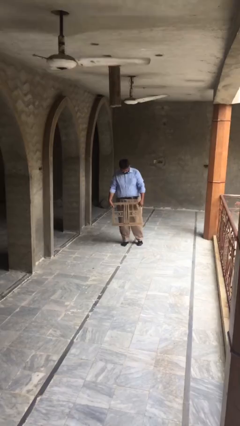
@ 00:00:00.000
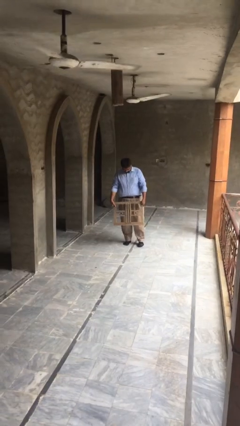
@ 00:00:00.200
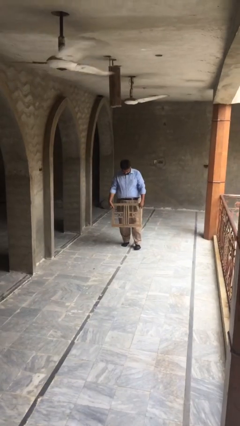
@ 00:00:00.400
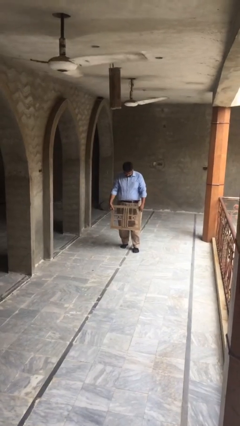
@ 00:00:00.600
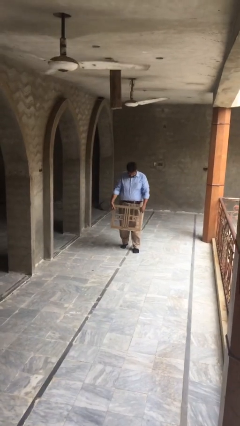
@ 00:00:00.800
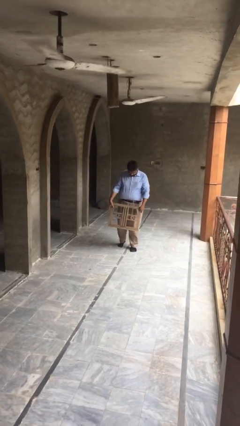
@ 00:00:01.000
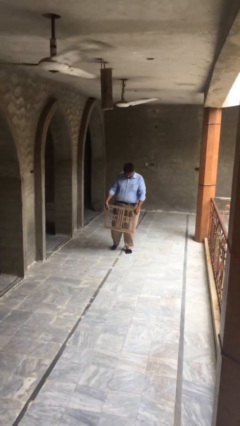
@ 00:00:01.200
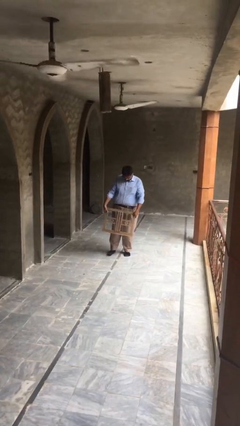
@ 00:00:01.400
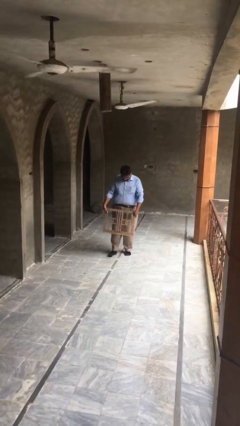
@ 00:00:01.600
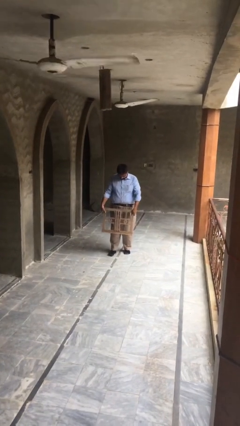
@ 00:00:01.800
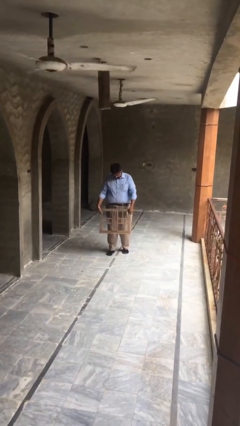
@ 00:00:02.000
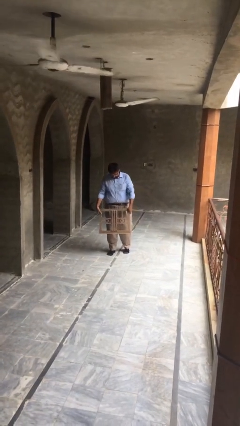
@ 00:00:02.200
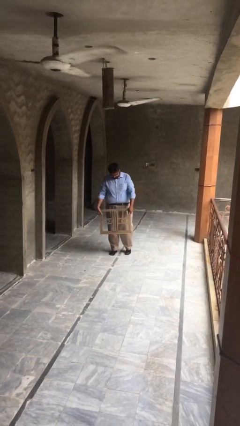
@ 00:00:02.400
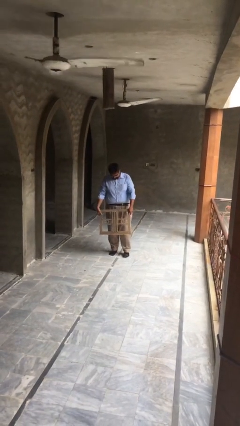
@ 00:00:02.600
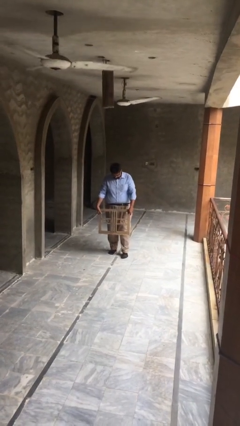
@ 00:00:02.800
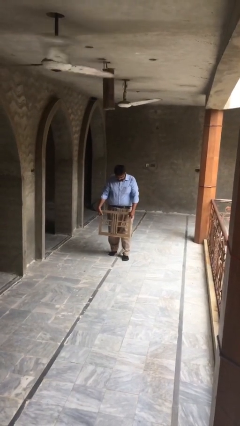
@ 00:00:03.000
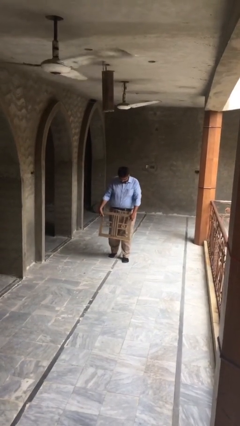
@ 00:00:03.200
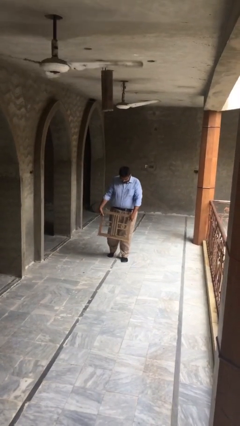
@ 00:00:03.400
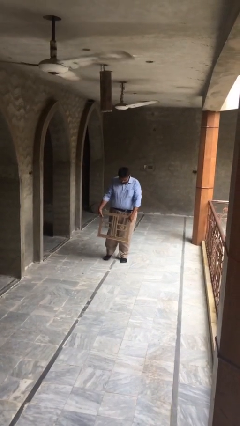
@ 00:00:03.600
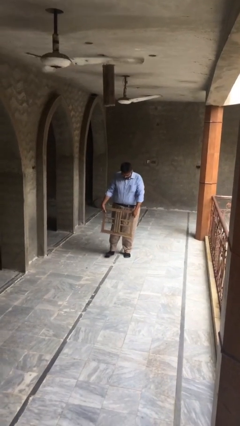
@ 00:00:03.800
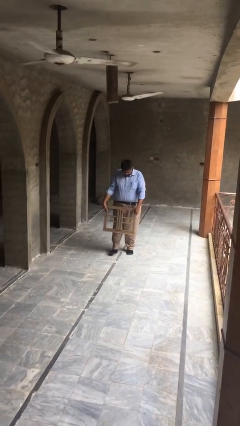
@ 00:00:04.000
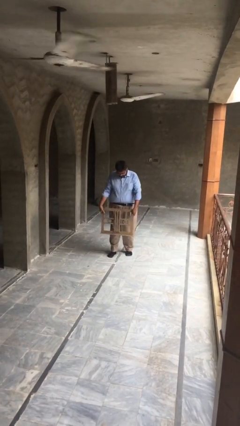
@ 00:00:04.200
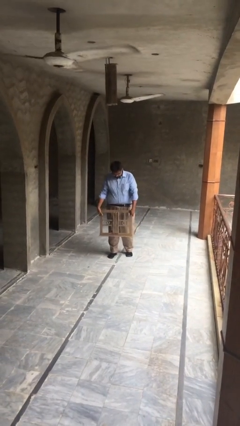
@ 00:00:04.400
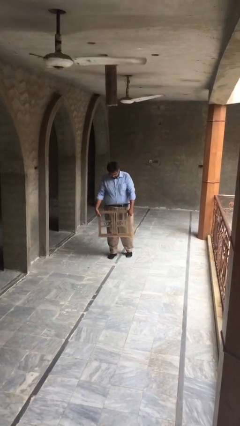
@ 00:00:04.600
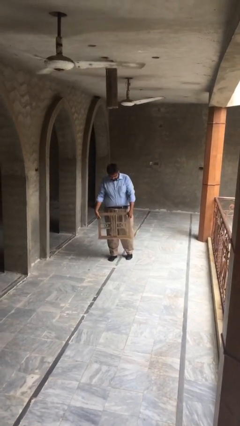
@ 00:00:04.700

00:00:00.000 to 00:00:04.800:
person carries heavy object

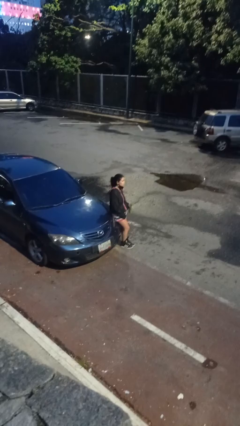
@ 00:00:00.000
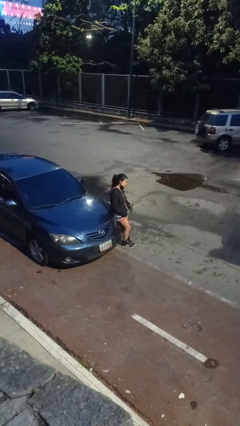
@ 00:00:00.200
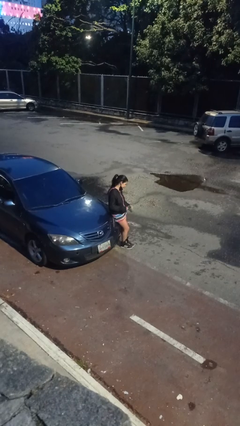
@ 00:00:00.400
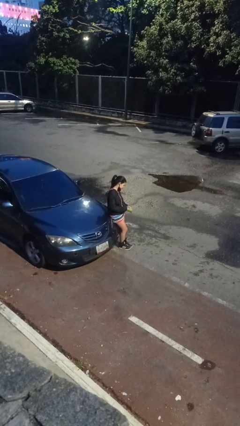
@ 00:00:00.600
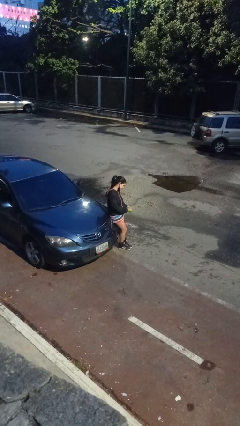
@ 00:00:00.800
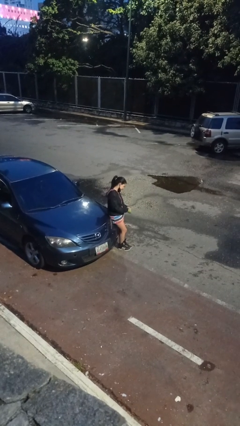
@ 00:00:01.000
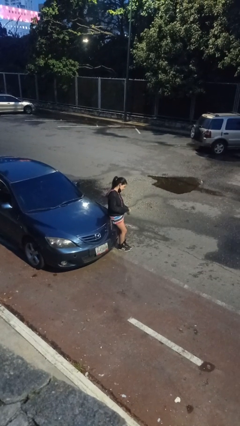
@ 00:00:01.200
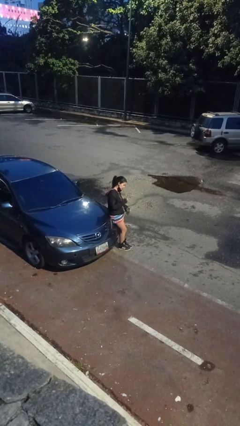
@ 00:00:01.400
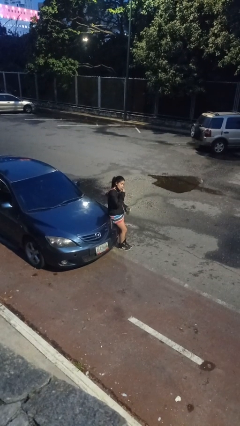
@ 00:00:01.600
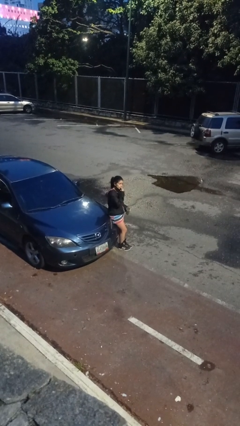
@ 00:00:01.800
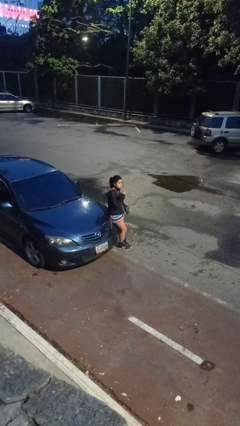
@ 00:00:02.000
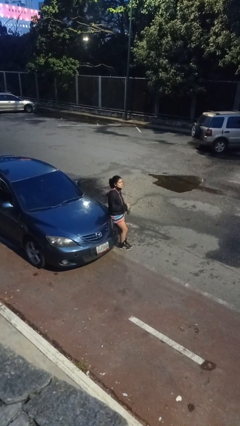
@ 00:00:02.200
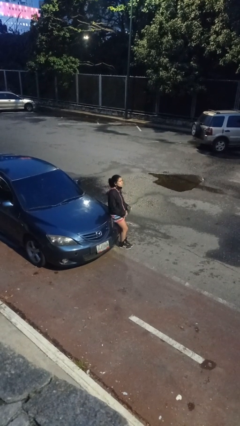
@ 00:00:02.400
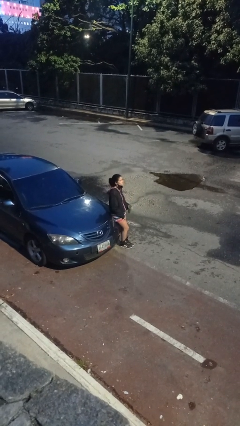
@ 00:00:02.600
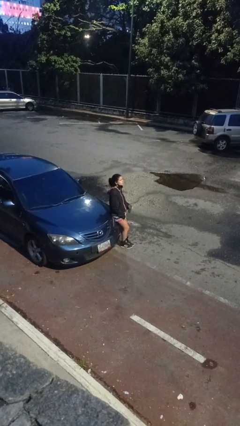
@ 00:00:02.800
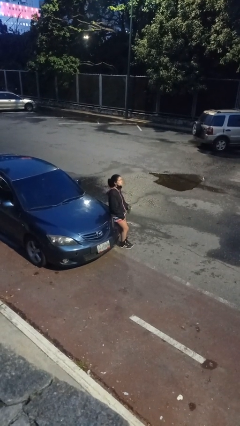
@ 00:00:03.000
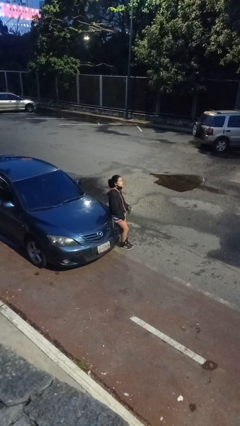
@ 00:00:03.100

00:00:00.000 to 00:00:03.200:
person eats snack from bag

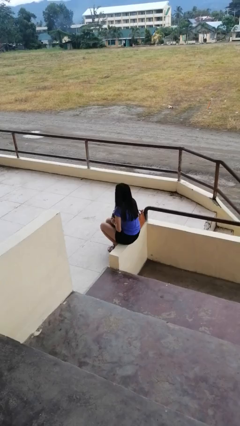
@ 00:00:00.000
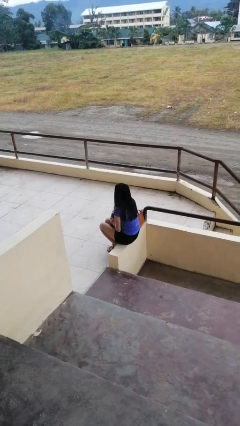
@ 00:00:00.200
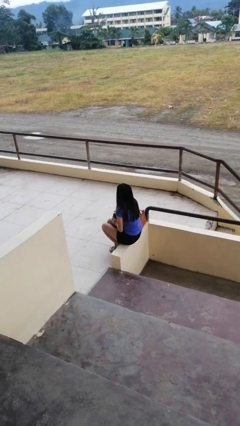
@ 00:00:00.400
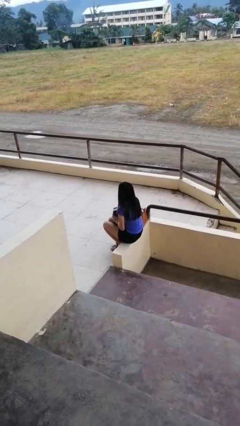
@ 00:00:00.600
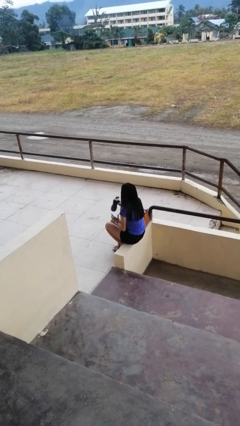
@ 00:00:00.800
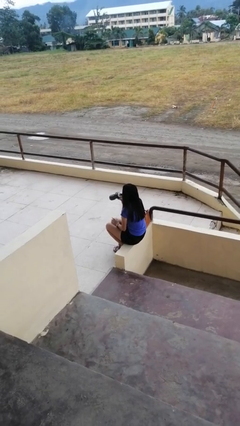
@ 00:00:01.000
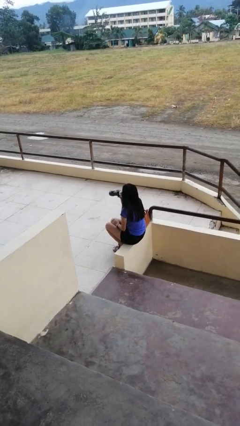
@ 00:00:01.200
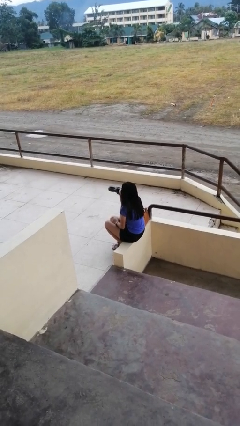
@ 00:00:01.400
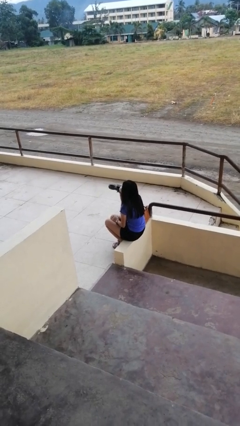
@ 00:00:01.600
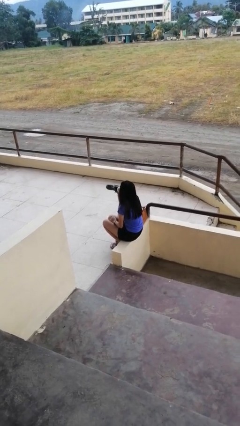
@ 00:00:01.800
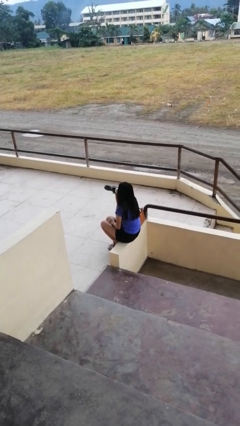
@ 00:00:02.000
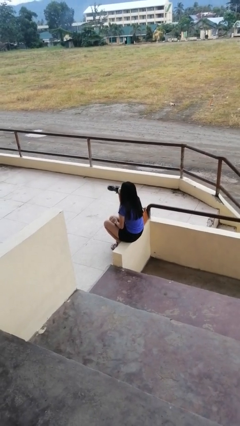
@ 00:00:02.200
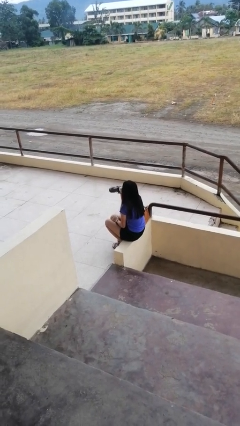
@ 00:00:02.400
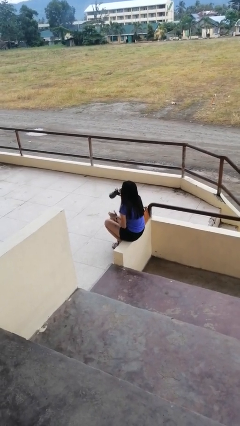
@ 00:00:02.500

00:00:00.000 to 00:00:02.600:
person drinks from bottle

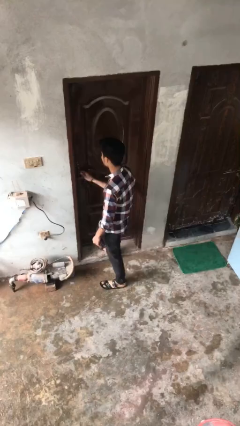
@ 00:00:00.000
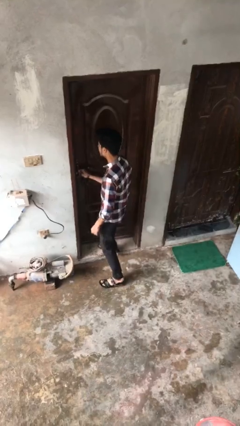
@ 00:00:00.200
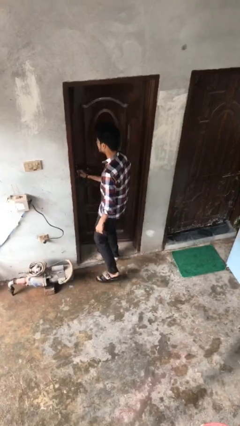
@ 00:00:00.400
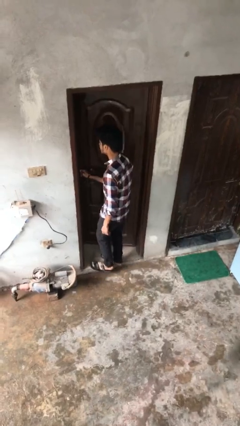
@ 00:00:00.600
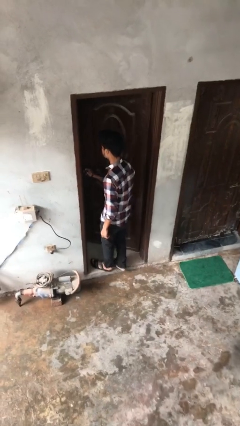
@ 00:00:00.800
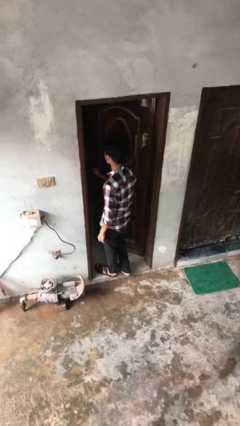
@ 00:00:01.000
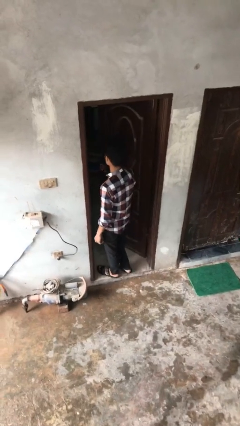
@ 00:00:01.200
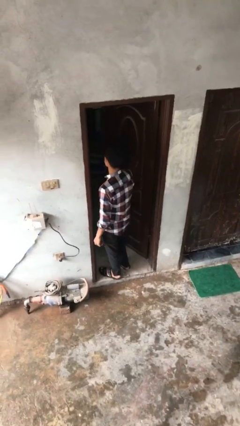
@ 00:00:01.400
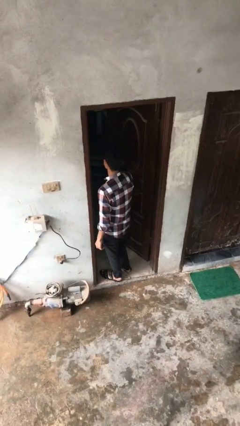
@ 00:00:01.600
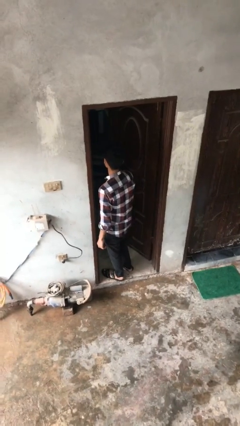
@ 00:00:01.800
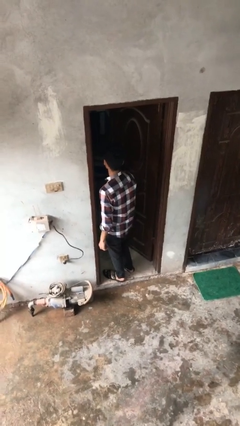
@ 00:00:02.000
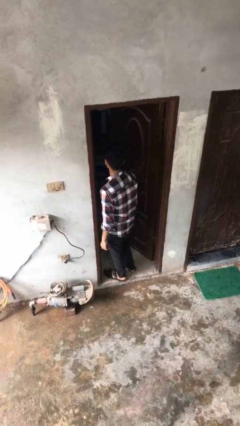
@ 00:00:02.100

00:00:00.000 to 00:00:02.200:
person opens facility door

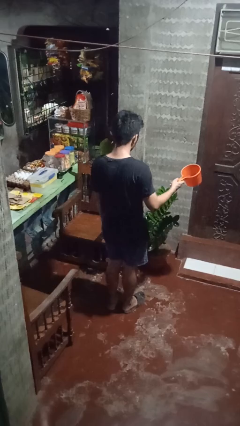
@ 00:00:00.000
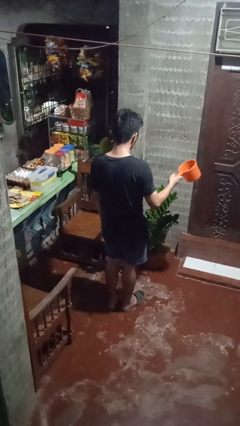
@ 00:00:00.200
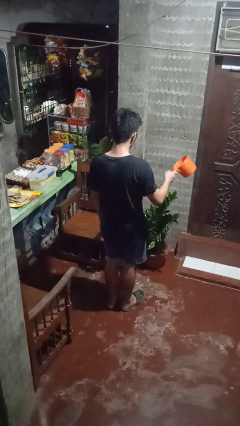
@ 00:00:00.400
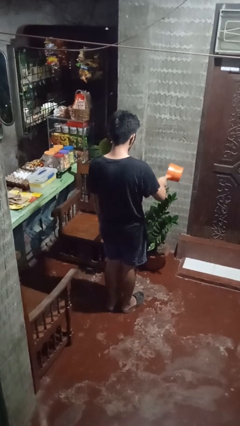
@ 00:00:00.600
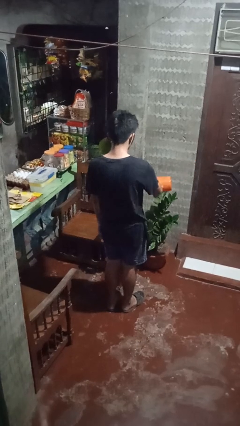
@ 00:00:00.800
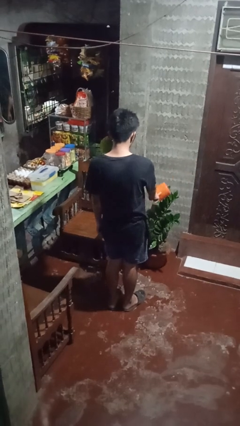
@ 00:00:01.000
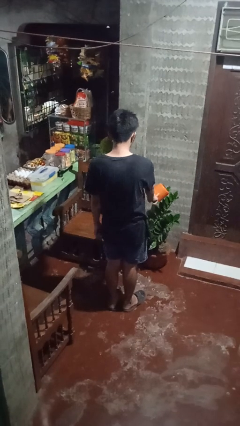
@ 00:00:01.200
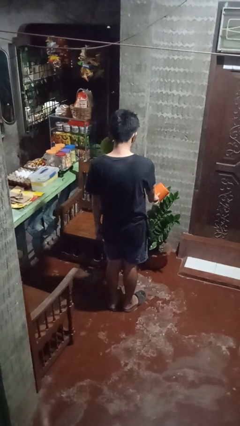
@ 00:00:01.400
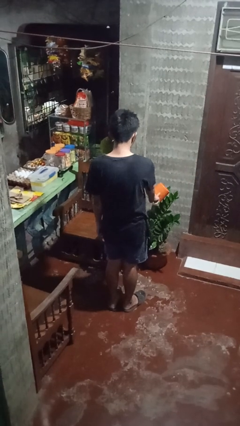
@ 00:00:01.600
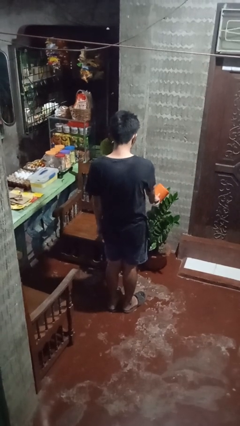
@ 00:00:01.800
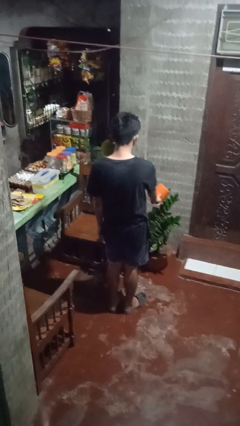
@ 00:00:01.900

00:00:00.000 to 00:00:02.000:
person waters houseplant

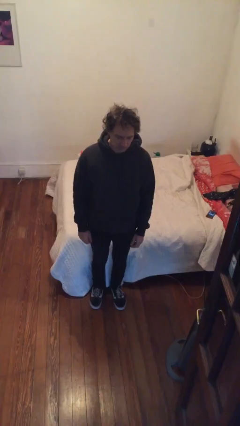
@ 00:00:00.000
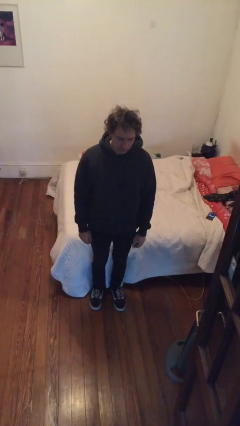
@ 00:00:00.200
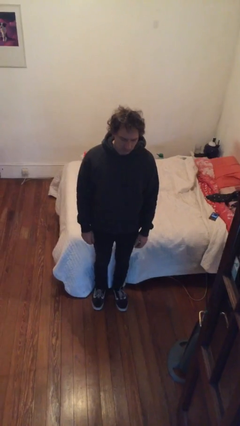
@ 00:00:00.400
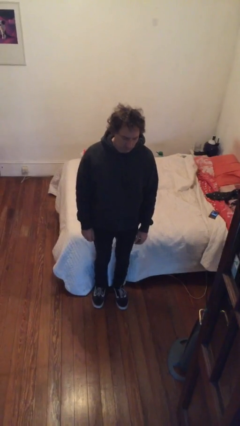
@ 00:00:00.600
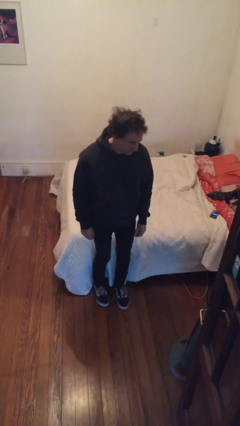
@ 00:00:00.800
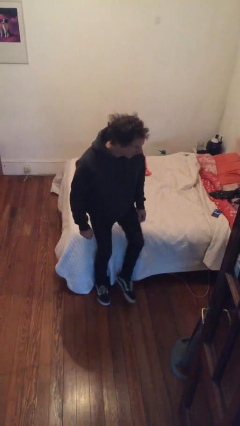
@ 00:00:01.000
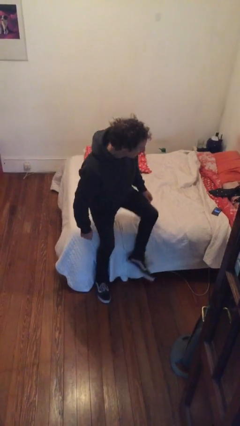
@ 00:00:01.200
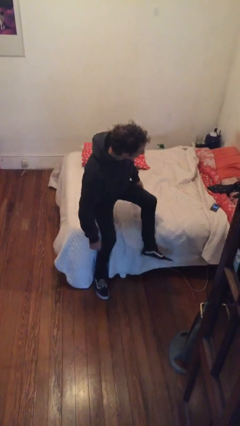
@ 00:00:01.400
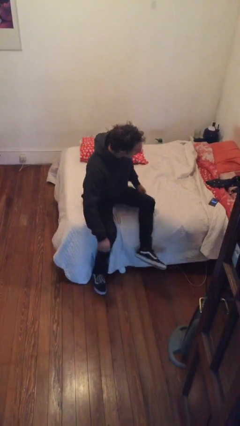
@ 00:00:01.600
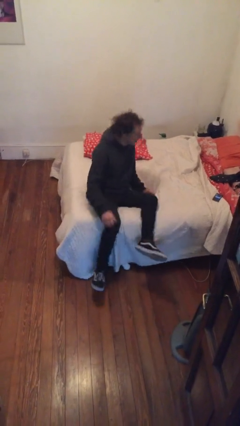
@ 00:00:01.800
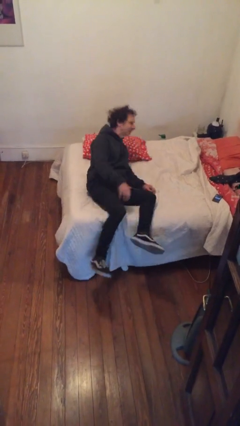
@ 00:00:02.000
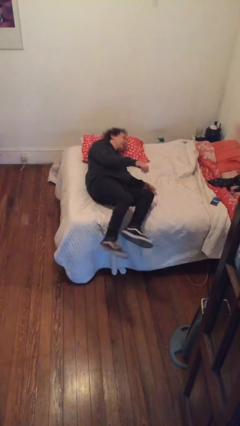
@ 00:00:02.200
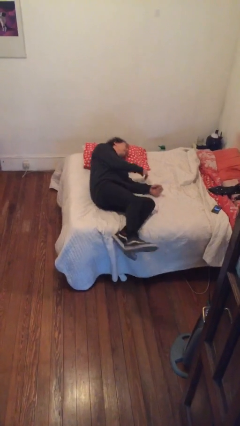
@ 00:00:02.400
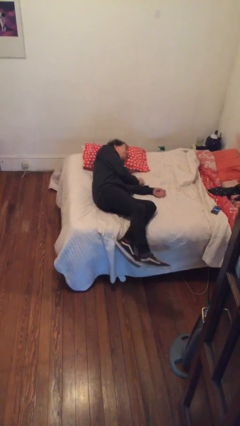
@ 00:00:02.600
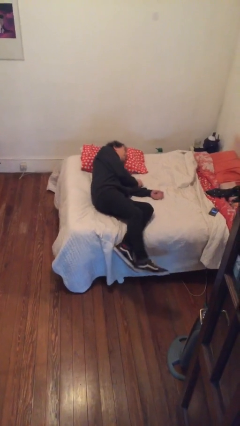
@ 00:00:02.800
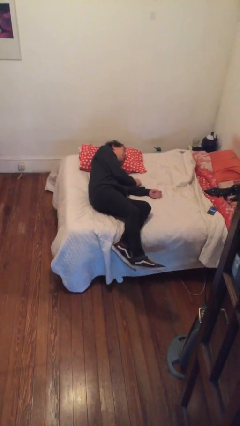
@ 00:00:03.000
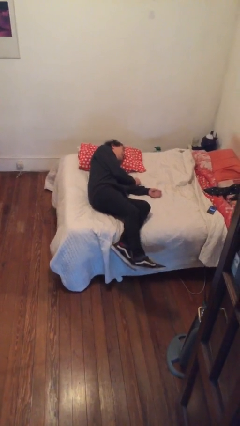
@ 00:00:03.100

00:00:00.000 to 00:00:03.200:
person lies down on bed
